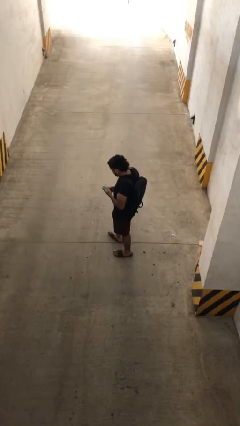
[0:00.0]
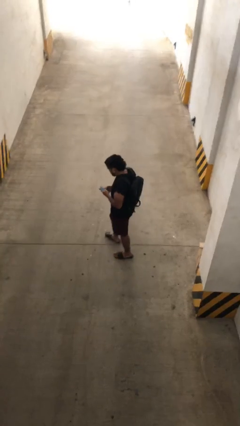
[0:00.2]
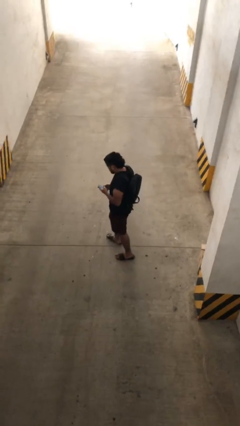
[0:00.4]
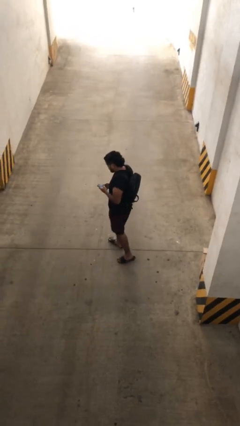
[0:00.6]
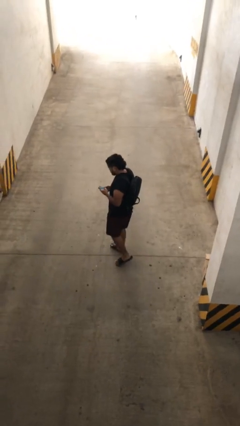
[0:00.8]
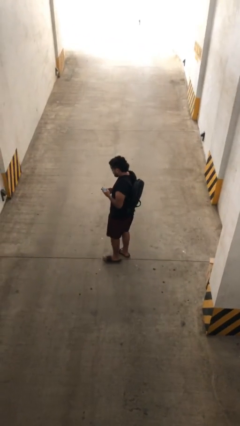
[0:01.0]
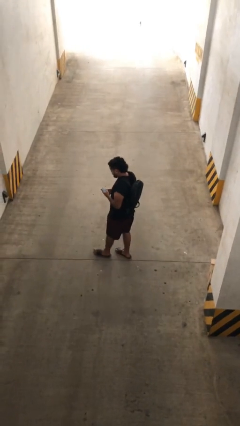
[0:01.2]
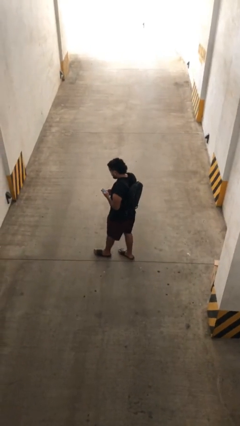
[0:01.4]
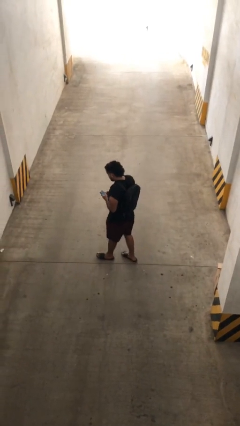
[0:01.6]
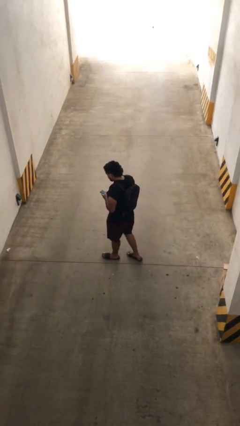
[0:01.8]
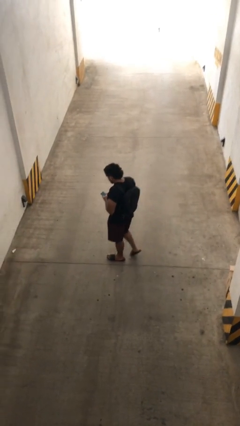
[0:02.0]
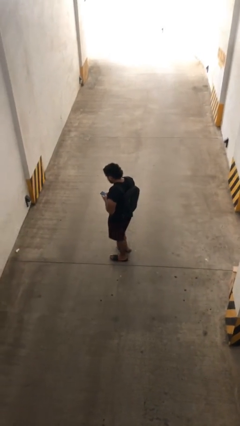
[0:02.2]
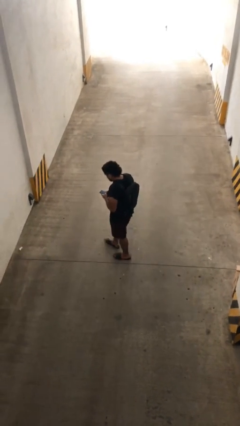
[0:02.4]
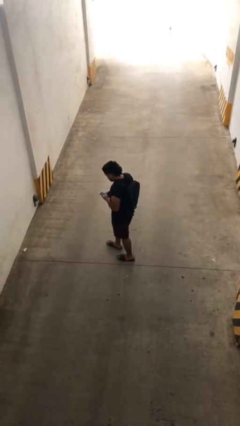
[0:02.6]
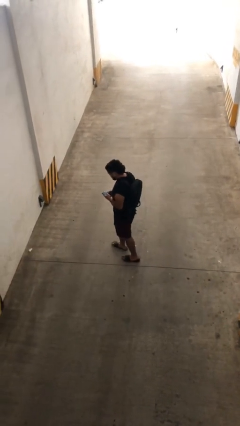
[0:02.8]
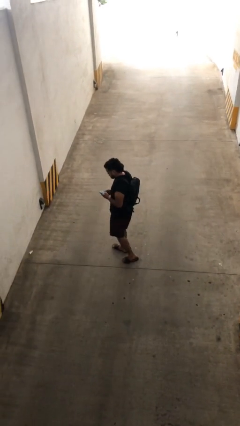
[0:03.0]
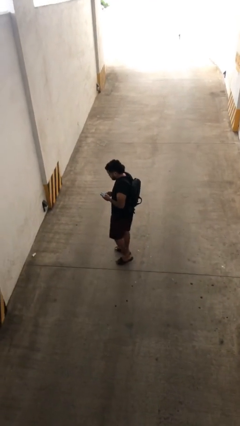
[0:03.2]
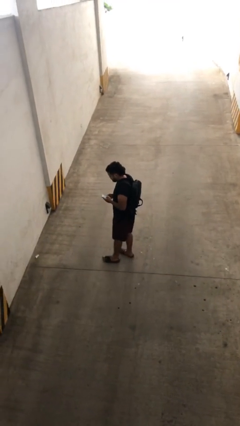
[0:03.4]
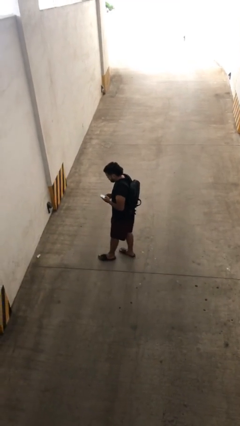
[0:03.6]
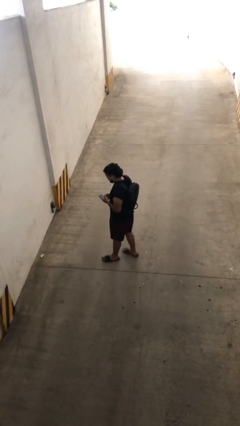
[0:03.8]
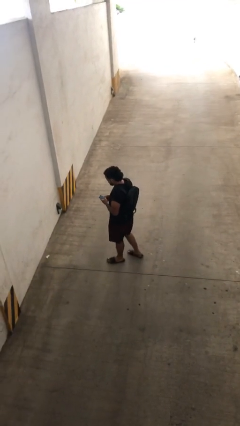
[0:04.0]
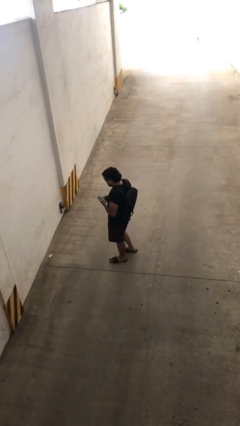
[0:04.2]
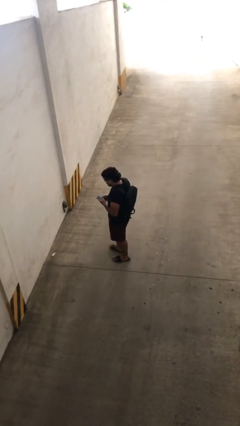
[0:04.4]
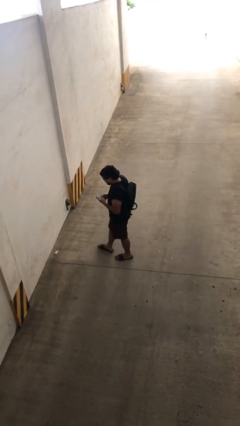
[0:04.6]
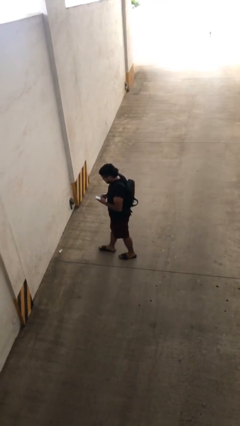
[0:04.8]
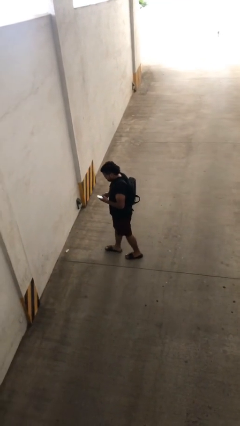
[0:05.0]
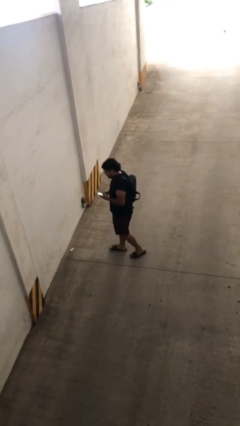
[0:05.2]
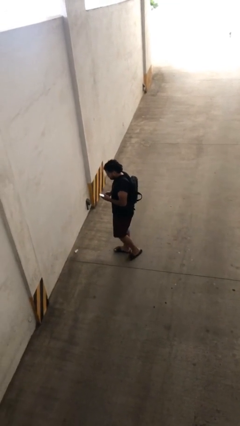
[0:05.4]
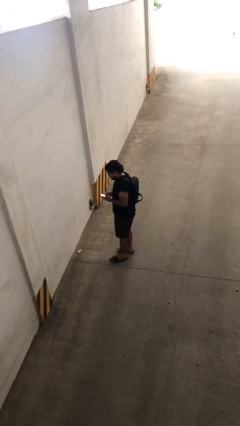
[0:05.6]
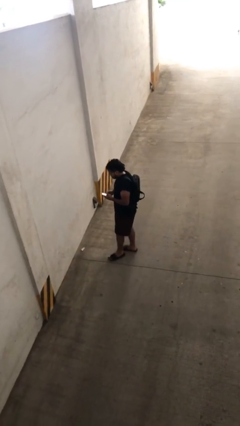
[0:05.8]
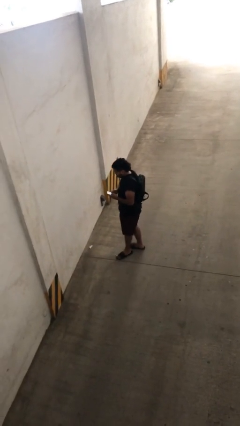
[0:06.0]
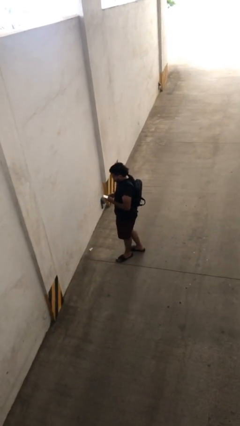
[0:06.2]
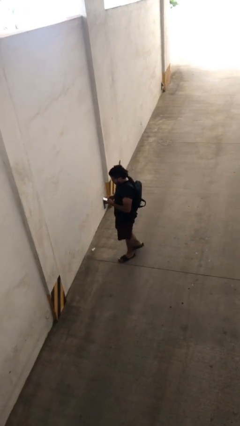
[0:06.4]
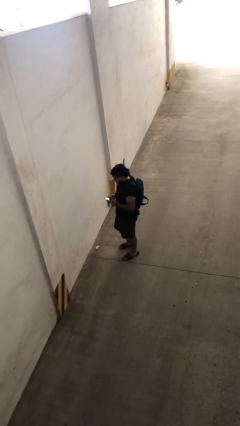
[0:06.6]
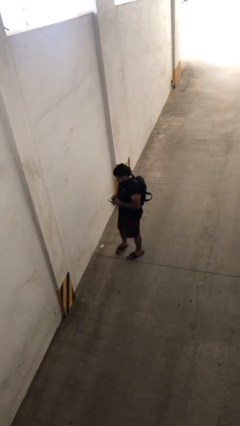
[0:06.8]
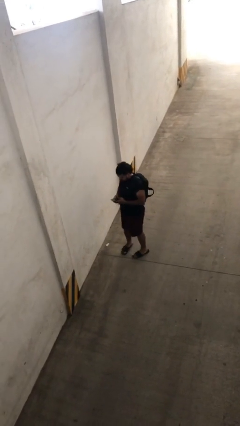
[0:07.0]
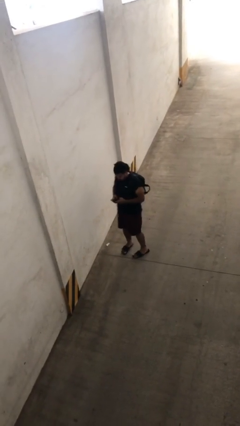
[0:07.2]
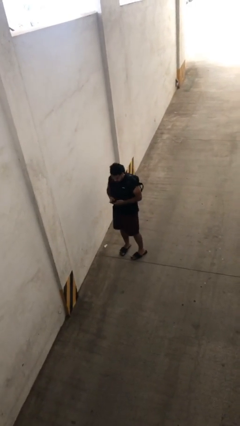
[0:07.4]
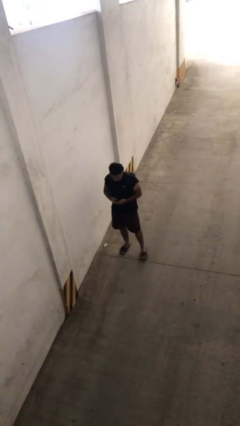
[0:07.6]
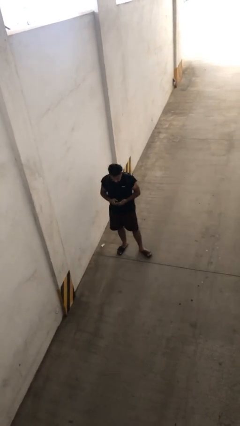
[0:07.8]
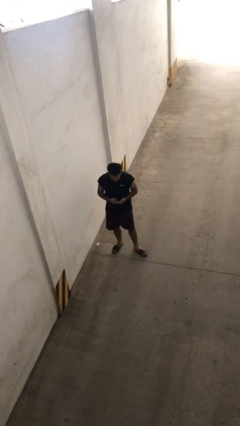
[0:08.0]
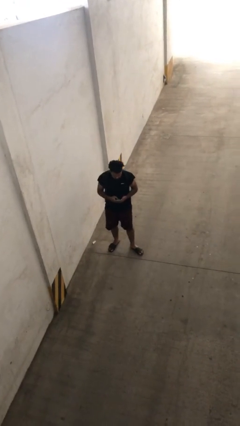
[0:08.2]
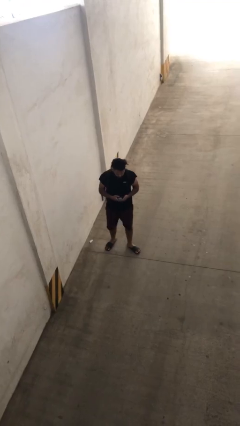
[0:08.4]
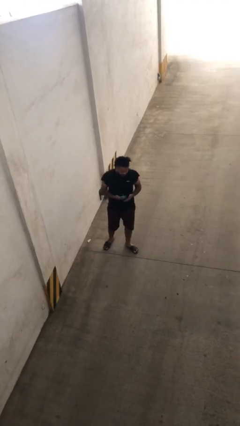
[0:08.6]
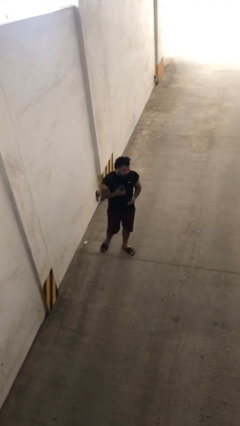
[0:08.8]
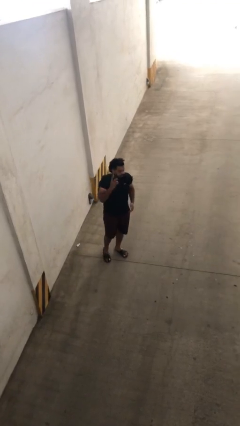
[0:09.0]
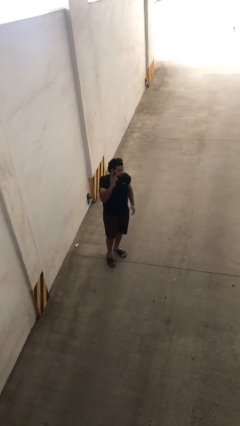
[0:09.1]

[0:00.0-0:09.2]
person texts on phone

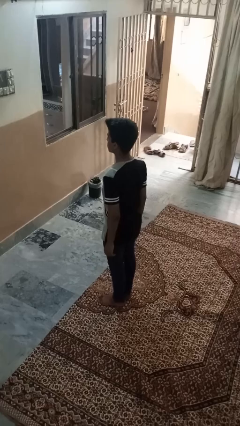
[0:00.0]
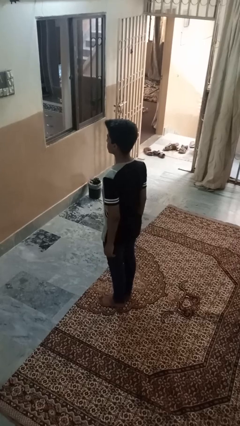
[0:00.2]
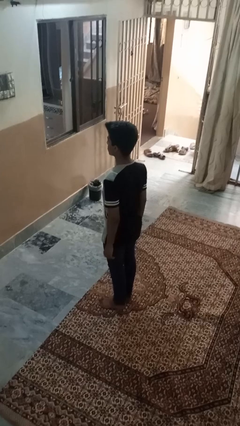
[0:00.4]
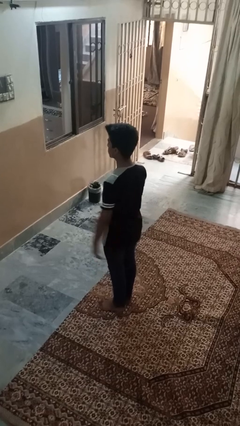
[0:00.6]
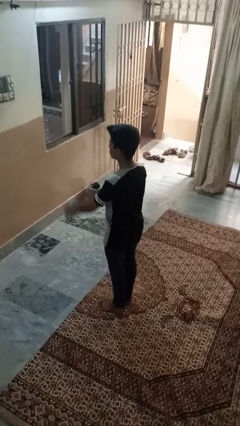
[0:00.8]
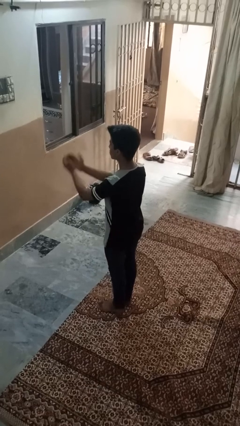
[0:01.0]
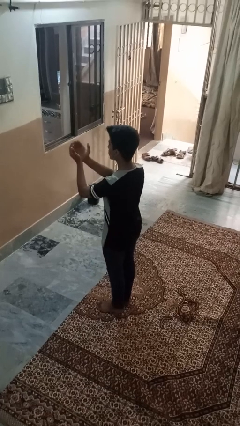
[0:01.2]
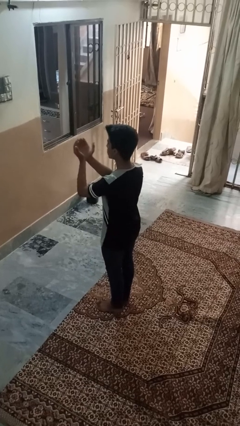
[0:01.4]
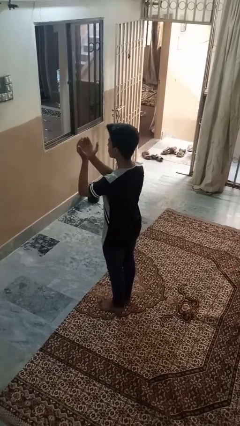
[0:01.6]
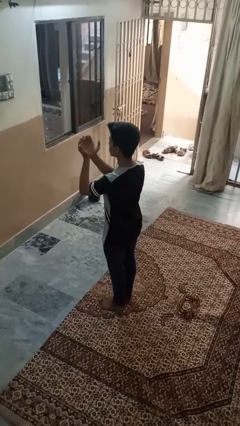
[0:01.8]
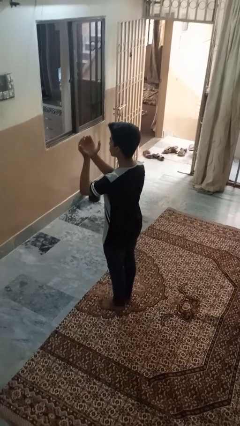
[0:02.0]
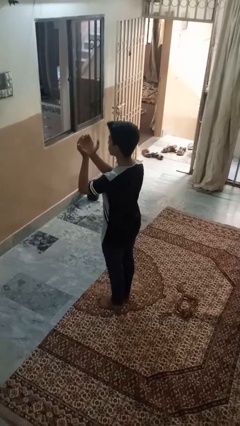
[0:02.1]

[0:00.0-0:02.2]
person prays

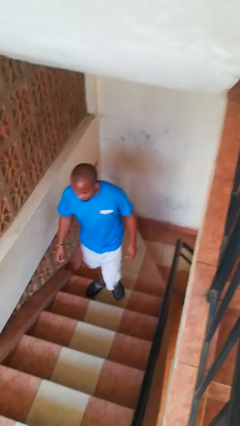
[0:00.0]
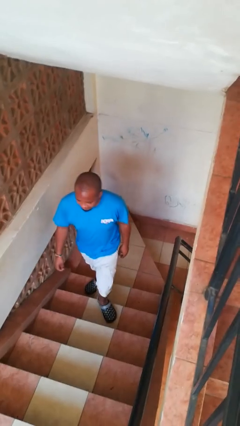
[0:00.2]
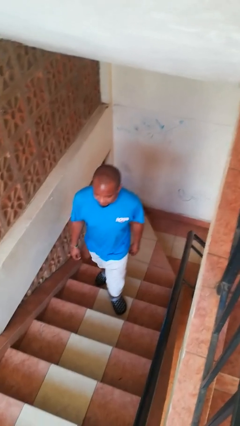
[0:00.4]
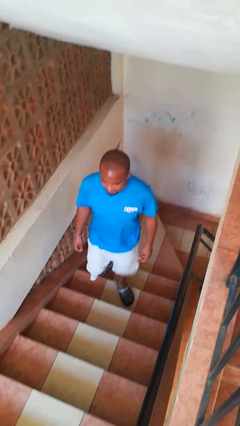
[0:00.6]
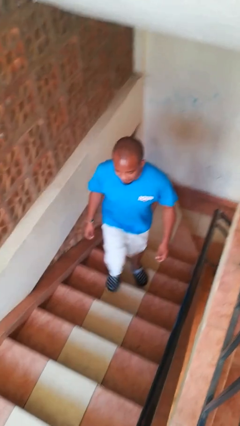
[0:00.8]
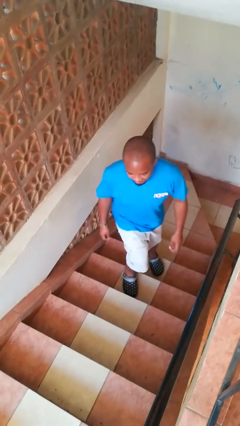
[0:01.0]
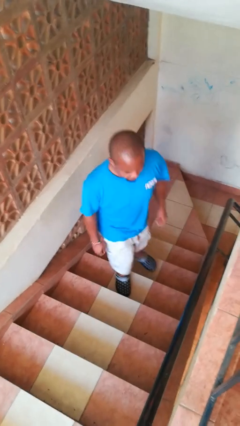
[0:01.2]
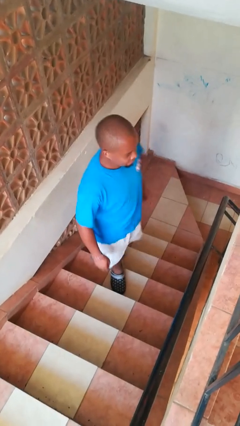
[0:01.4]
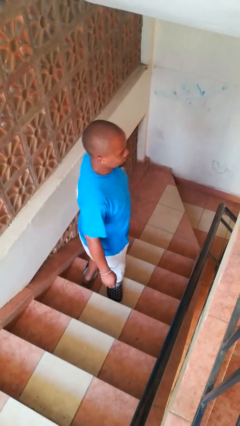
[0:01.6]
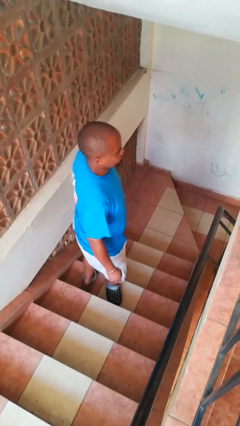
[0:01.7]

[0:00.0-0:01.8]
person climbs up stairs

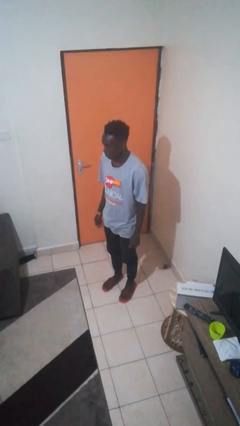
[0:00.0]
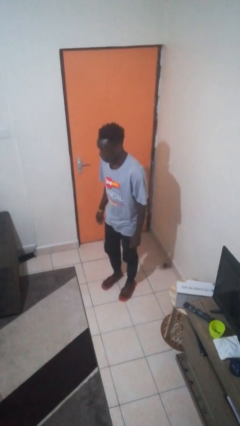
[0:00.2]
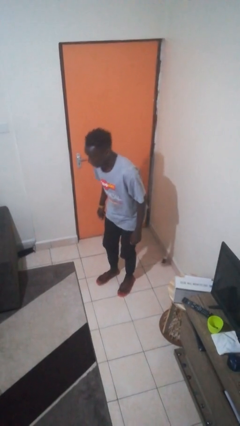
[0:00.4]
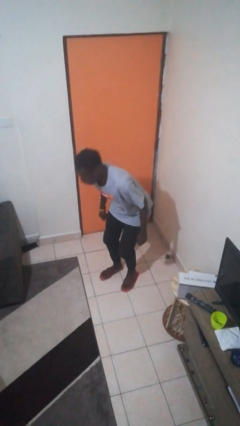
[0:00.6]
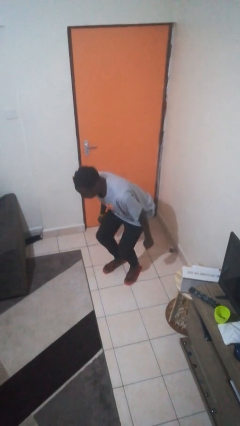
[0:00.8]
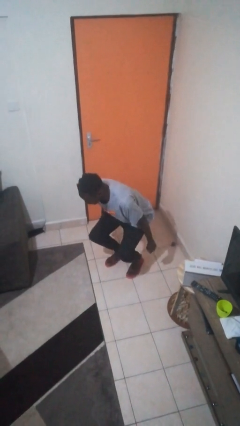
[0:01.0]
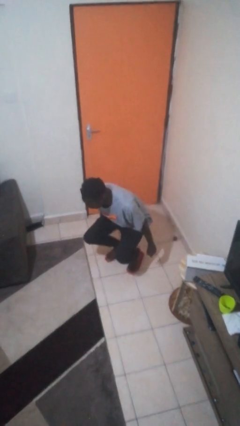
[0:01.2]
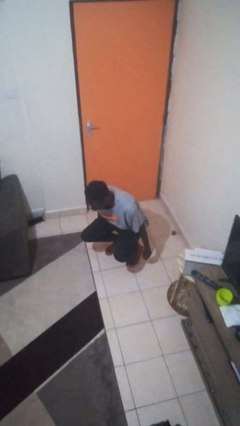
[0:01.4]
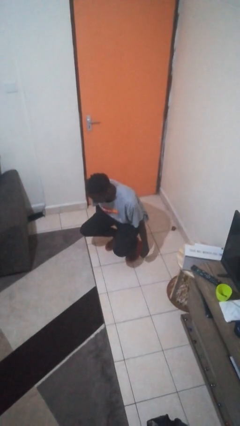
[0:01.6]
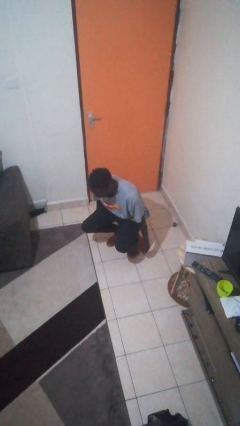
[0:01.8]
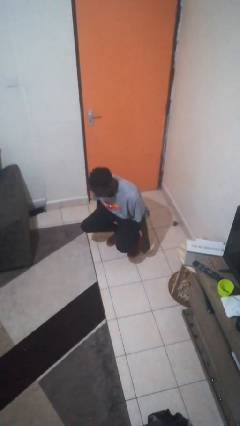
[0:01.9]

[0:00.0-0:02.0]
person squats

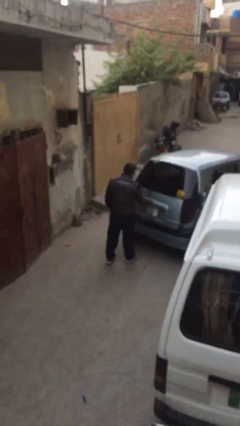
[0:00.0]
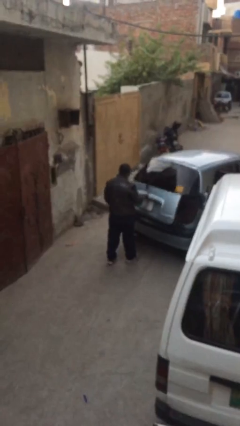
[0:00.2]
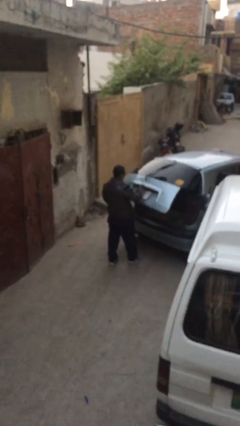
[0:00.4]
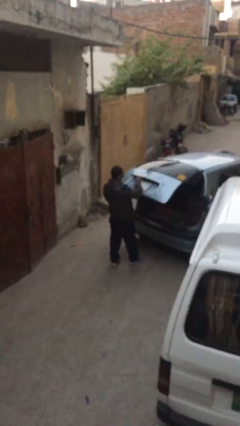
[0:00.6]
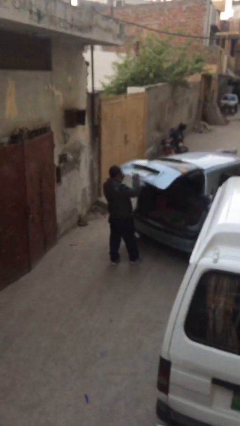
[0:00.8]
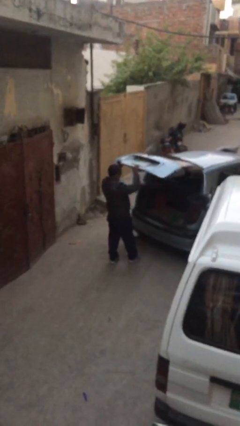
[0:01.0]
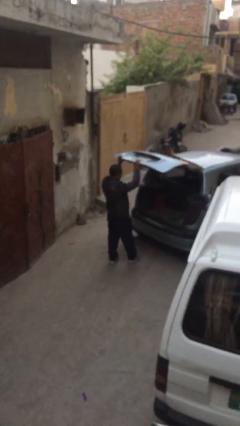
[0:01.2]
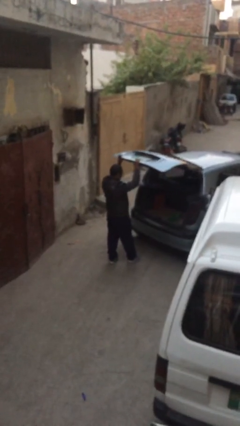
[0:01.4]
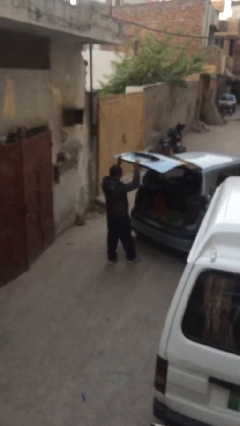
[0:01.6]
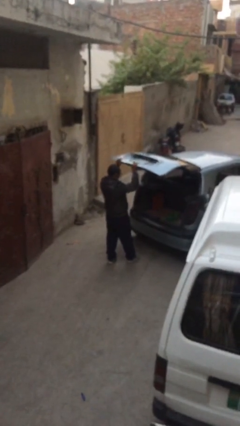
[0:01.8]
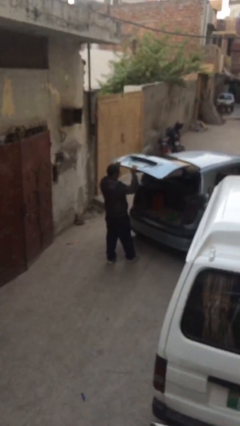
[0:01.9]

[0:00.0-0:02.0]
person opens car trunk

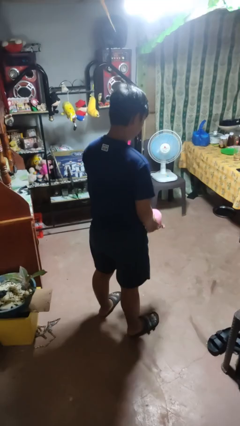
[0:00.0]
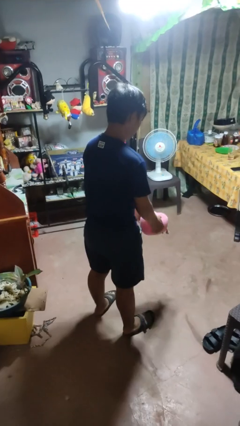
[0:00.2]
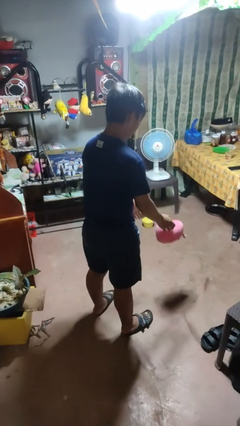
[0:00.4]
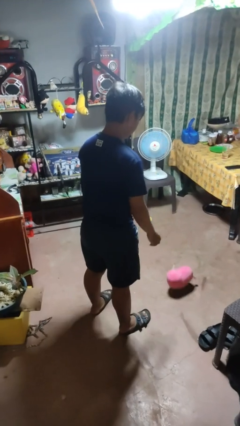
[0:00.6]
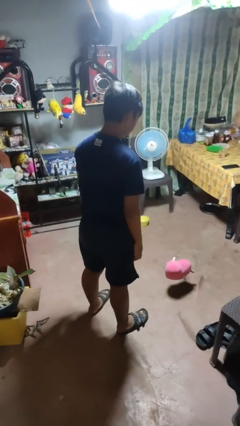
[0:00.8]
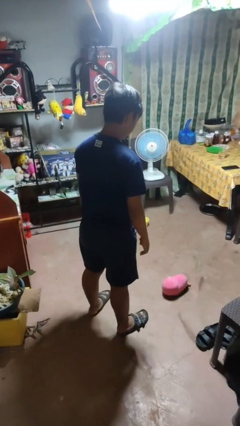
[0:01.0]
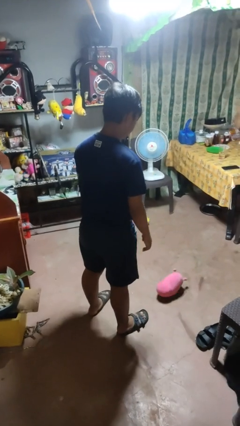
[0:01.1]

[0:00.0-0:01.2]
person throws object into air
